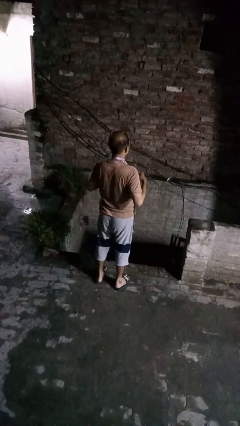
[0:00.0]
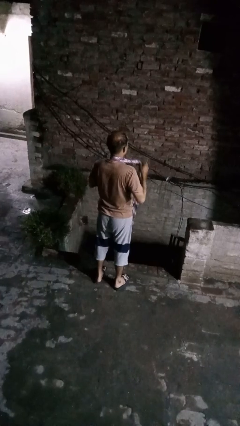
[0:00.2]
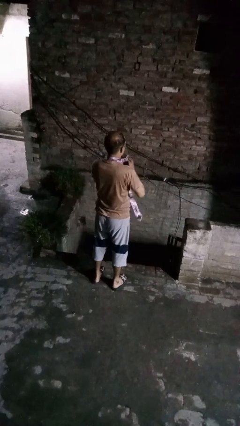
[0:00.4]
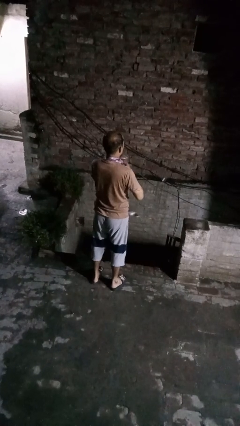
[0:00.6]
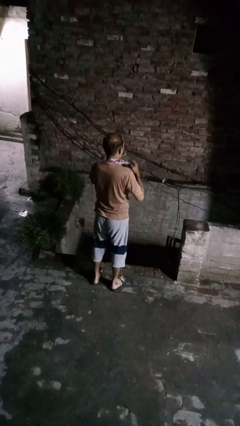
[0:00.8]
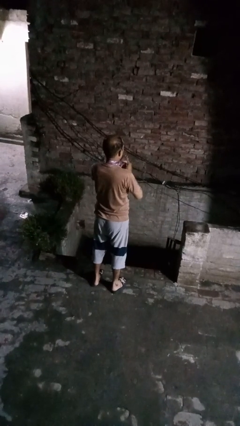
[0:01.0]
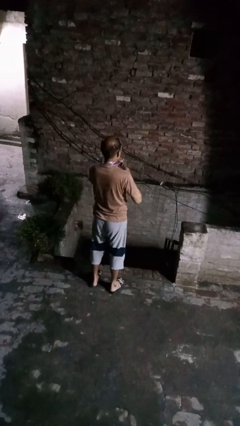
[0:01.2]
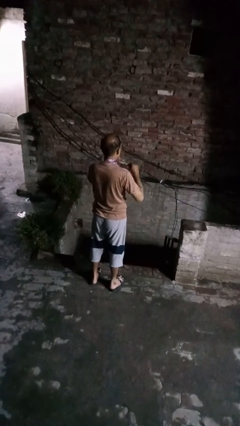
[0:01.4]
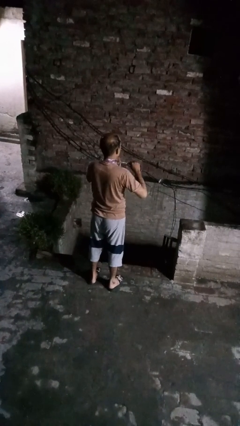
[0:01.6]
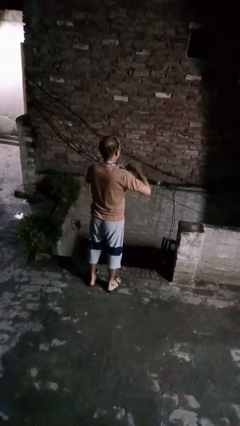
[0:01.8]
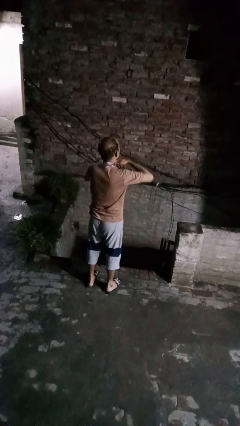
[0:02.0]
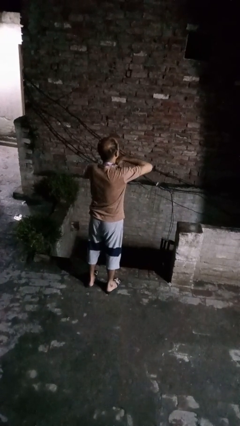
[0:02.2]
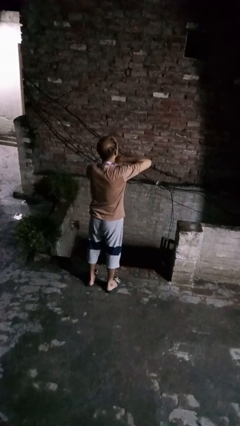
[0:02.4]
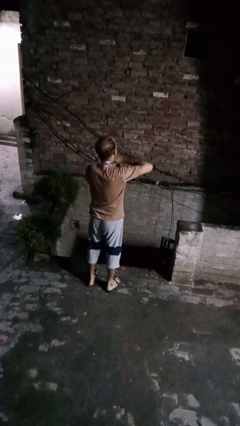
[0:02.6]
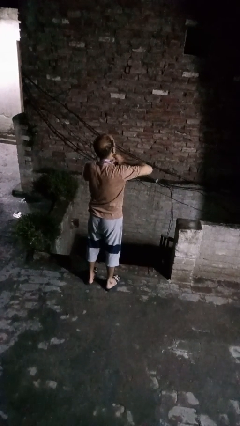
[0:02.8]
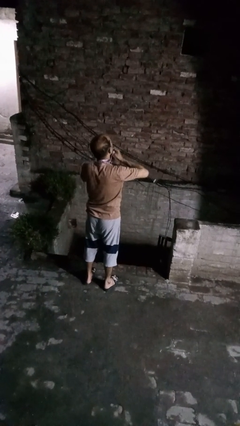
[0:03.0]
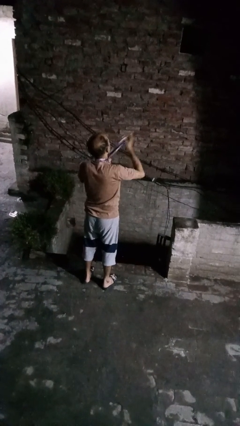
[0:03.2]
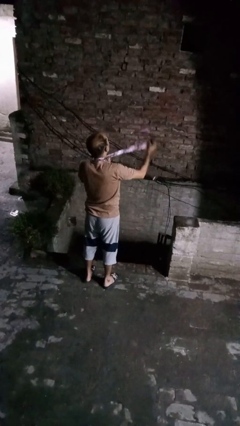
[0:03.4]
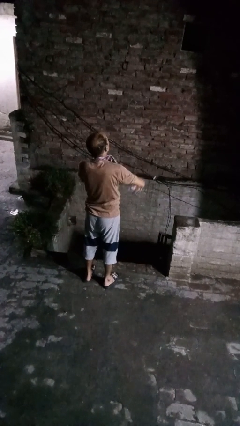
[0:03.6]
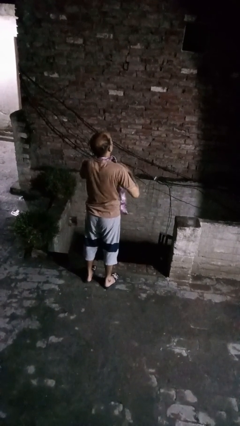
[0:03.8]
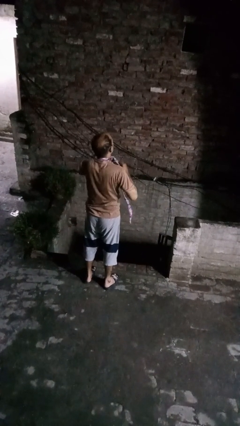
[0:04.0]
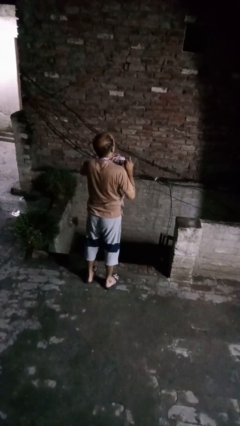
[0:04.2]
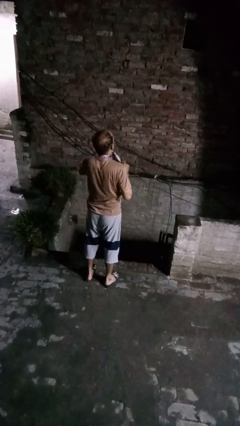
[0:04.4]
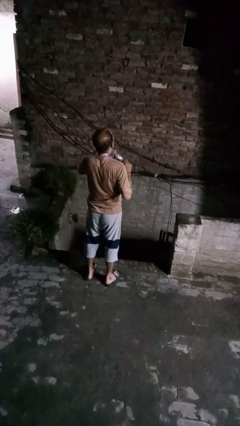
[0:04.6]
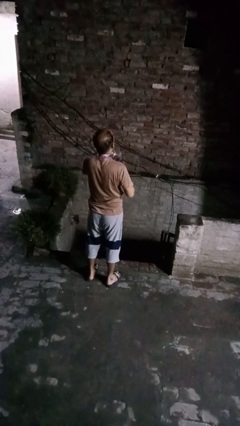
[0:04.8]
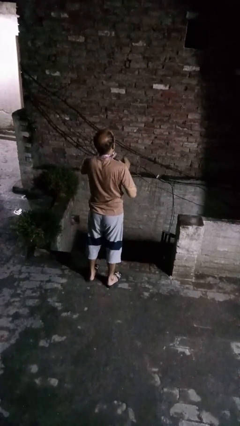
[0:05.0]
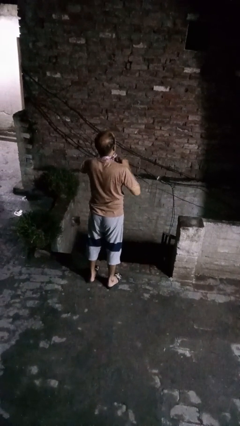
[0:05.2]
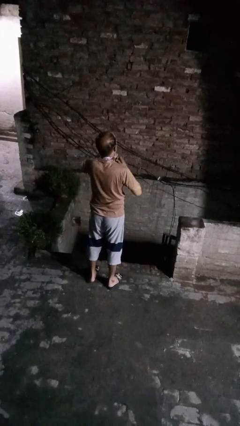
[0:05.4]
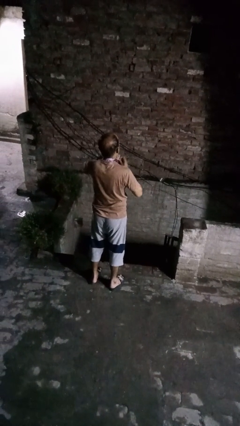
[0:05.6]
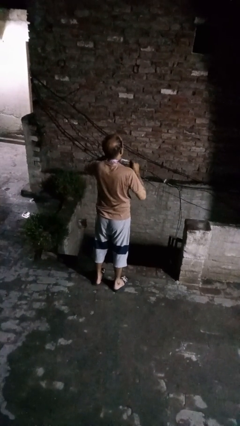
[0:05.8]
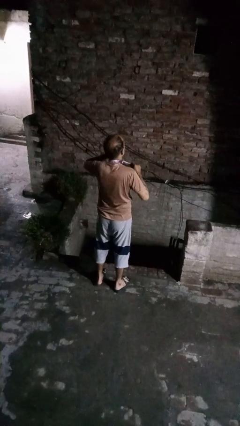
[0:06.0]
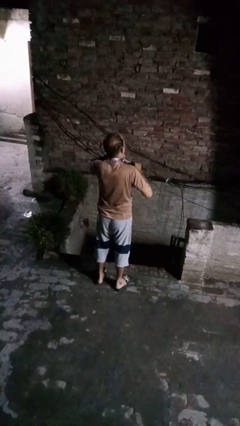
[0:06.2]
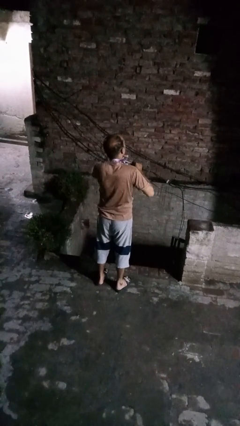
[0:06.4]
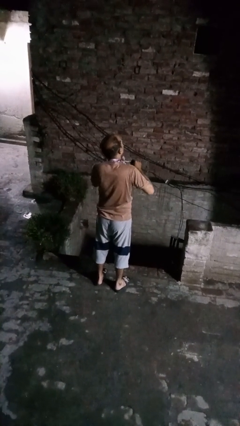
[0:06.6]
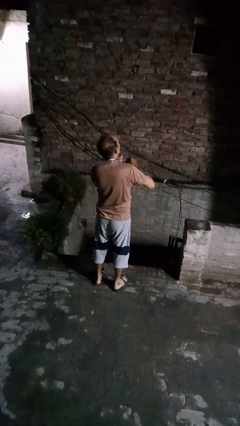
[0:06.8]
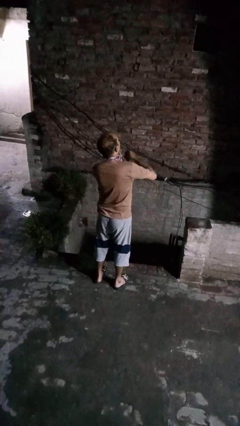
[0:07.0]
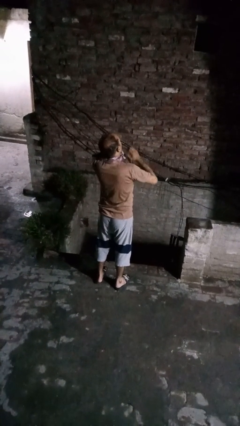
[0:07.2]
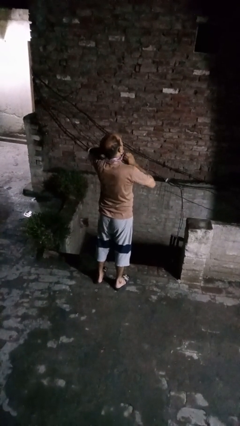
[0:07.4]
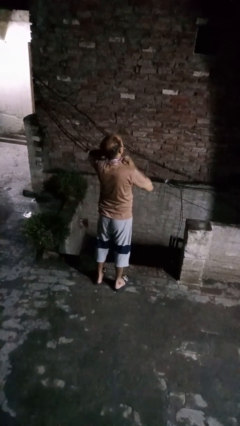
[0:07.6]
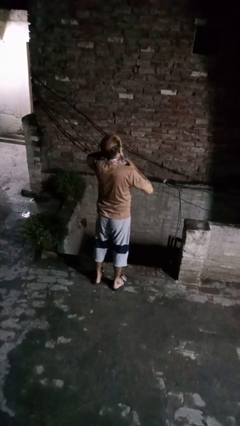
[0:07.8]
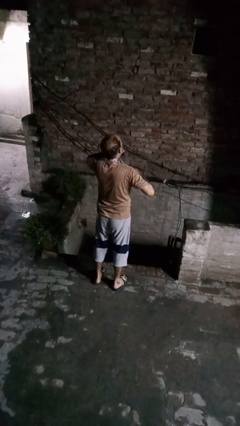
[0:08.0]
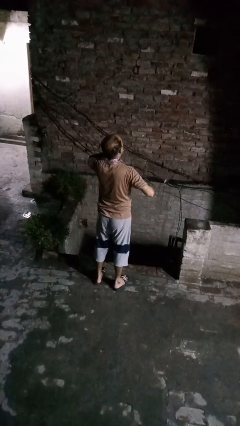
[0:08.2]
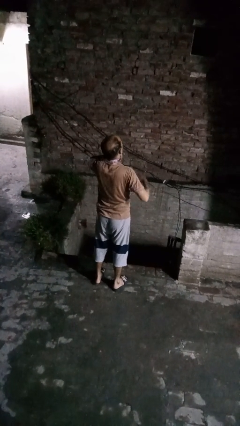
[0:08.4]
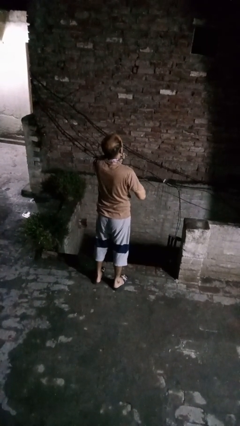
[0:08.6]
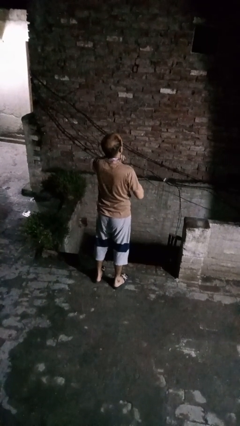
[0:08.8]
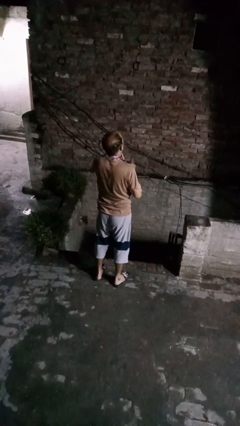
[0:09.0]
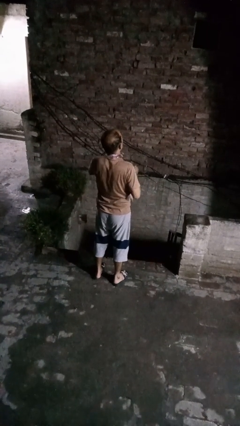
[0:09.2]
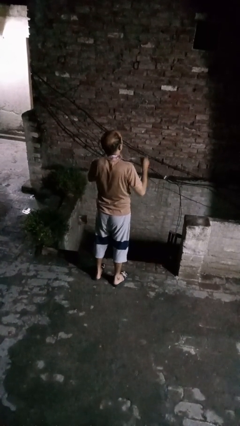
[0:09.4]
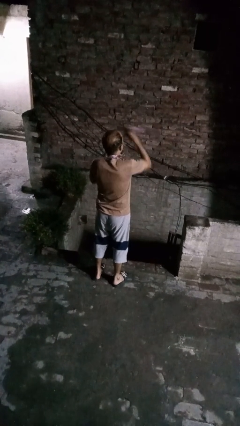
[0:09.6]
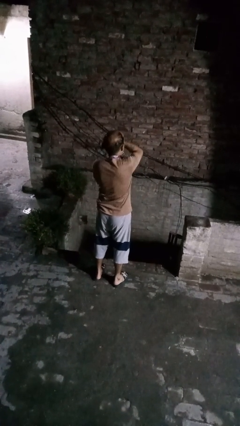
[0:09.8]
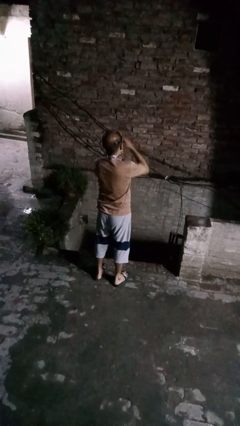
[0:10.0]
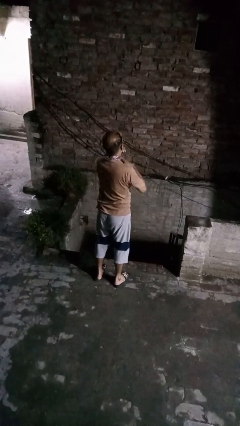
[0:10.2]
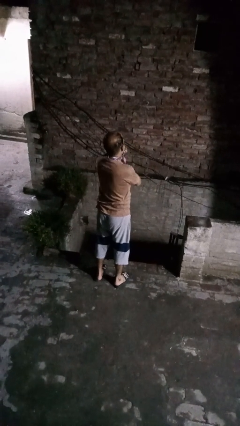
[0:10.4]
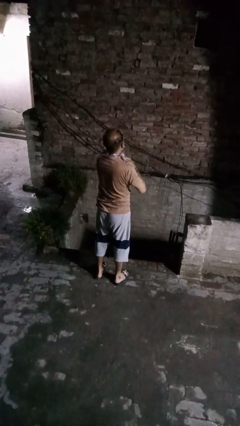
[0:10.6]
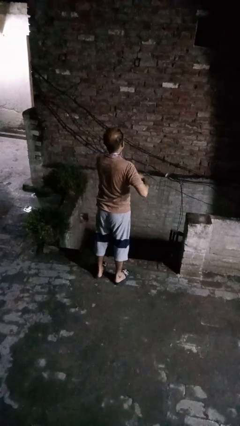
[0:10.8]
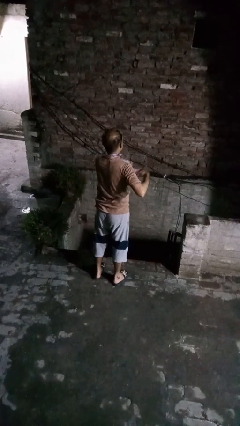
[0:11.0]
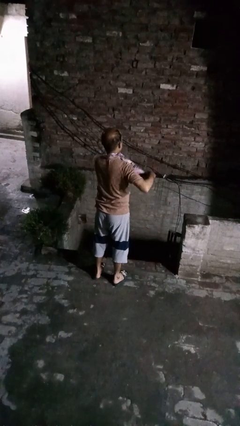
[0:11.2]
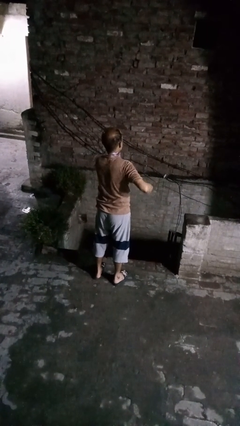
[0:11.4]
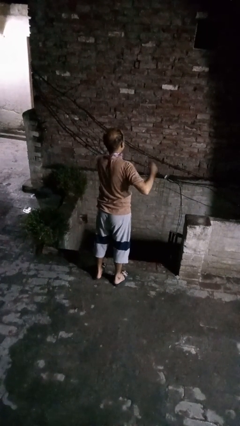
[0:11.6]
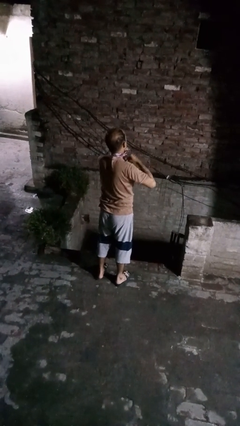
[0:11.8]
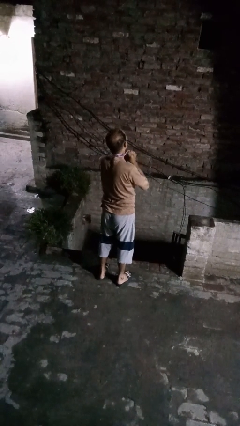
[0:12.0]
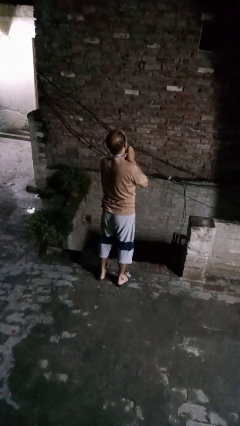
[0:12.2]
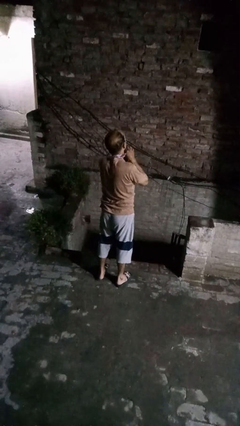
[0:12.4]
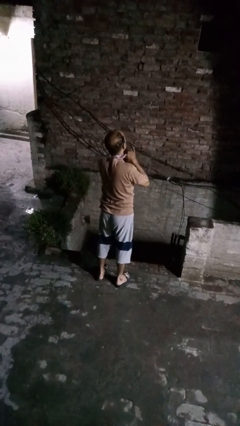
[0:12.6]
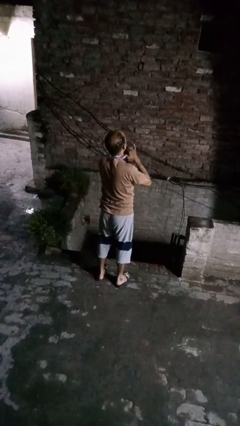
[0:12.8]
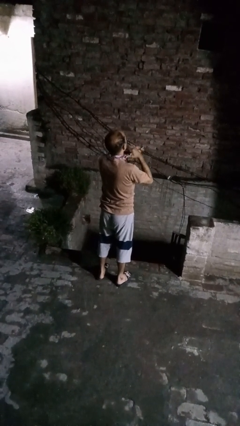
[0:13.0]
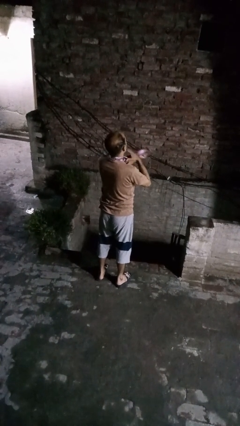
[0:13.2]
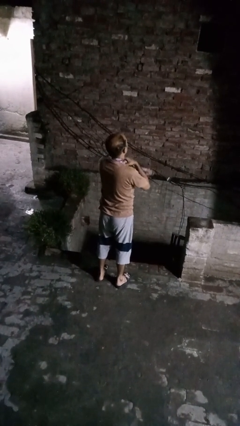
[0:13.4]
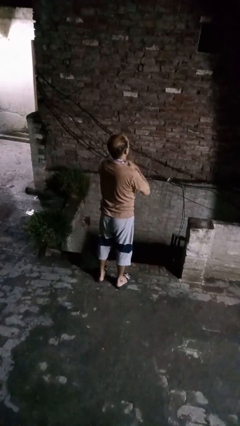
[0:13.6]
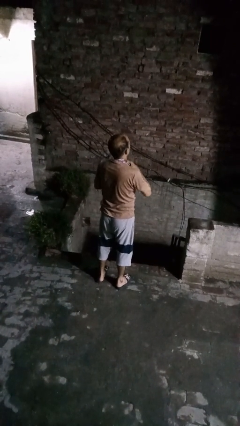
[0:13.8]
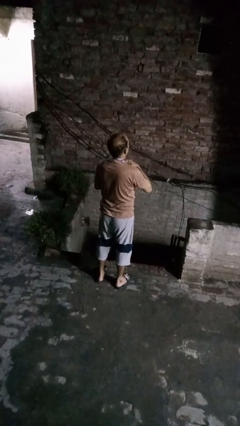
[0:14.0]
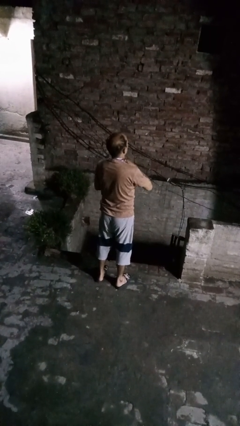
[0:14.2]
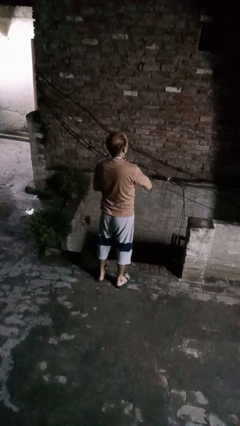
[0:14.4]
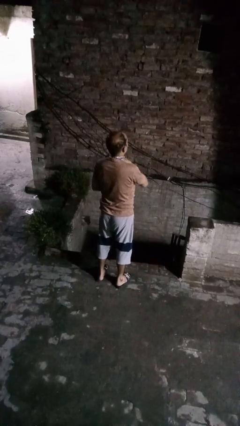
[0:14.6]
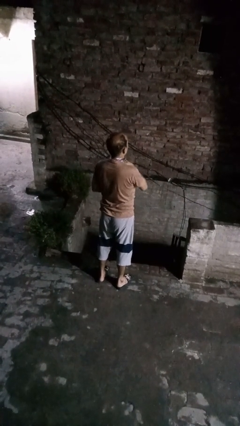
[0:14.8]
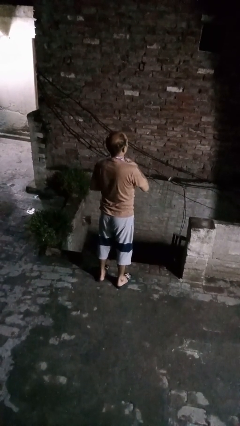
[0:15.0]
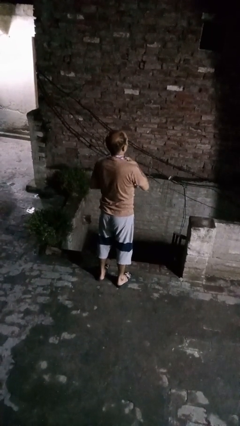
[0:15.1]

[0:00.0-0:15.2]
person puts on necktie

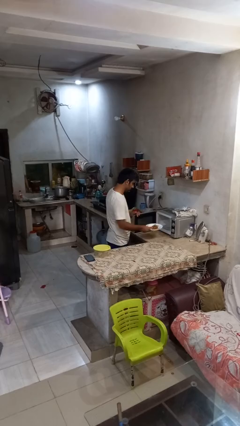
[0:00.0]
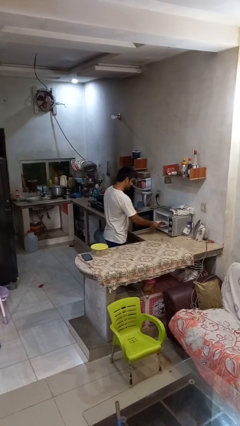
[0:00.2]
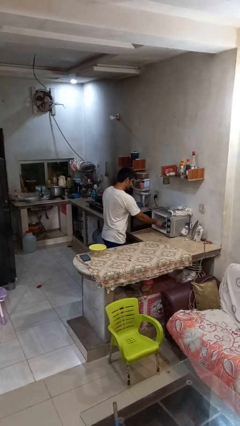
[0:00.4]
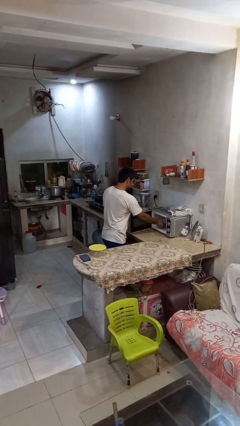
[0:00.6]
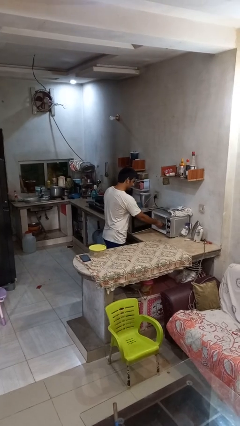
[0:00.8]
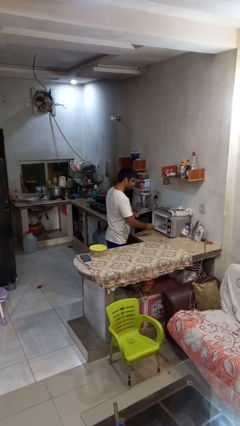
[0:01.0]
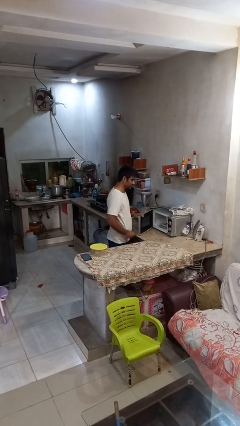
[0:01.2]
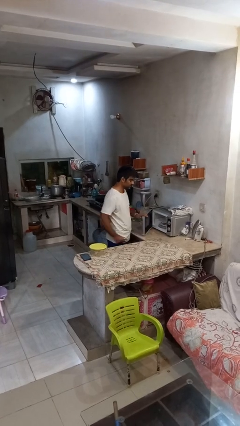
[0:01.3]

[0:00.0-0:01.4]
person puts object into microwave

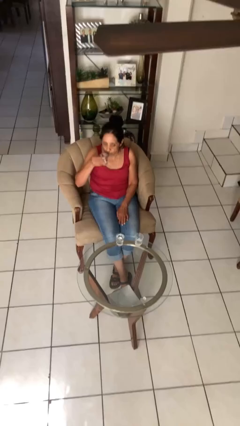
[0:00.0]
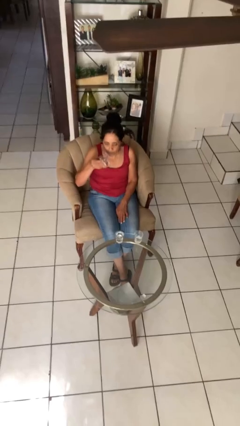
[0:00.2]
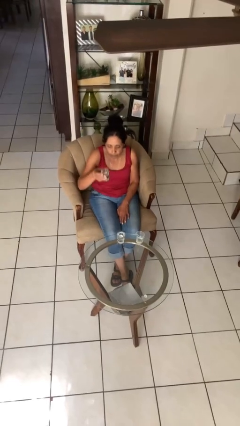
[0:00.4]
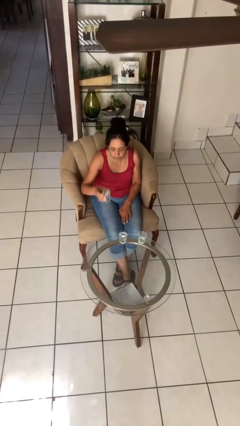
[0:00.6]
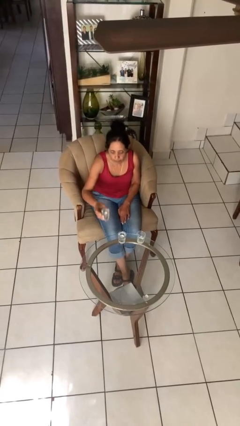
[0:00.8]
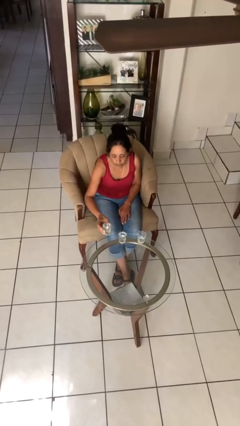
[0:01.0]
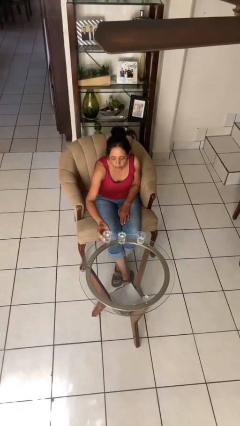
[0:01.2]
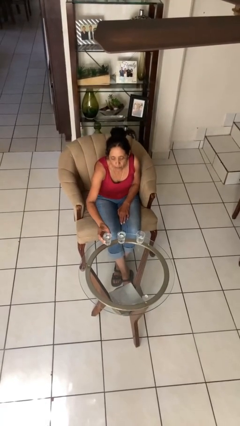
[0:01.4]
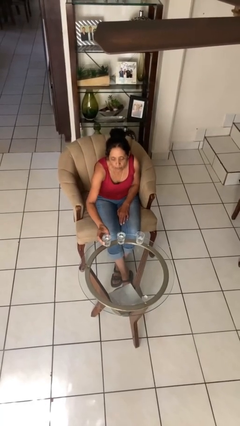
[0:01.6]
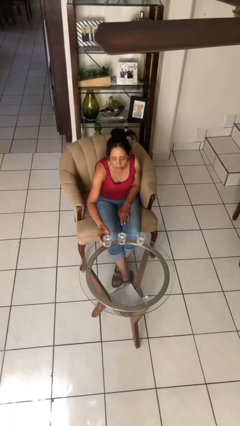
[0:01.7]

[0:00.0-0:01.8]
person puts down object on table
